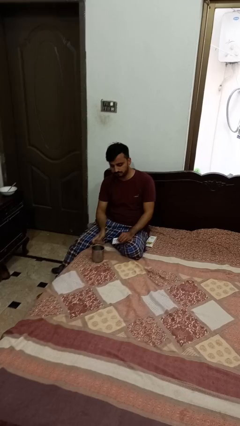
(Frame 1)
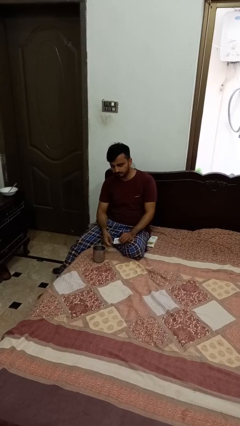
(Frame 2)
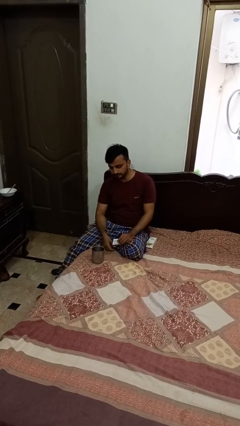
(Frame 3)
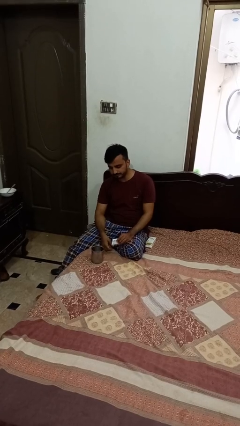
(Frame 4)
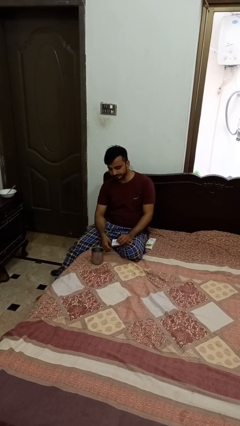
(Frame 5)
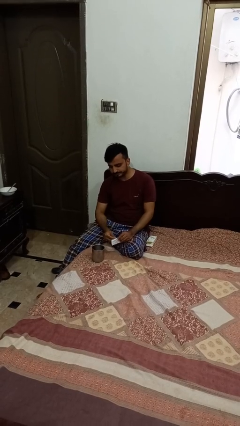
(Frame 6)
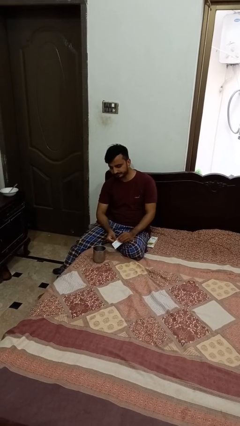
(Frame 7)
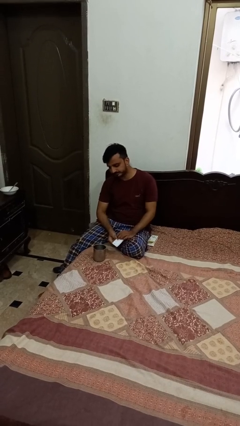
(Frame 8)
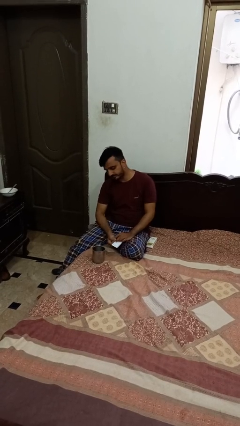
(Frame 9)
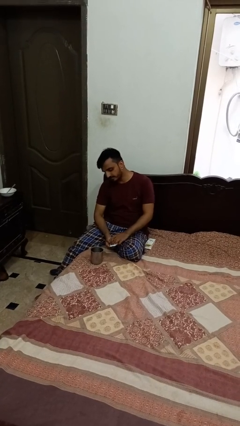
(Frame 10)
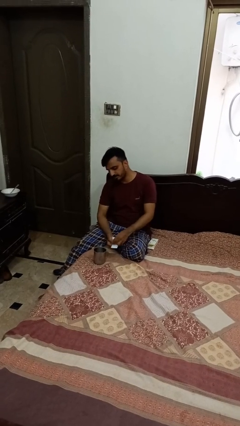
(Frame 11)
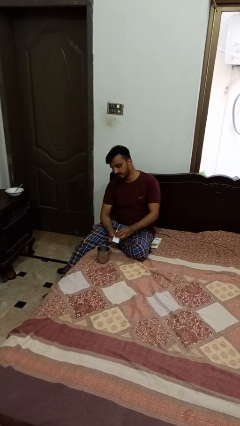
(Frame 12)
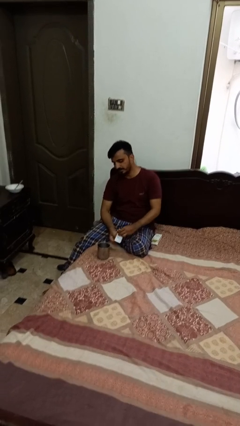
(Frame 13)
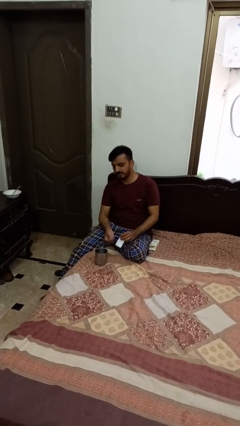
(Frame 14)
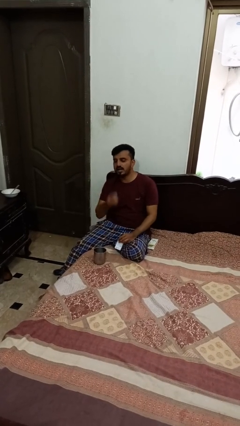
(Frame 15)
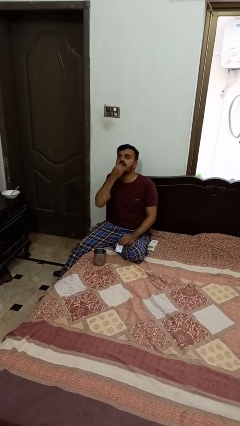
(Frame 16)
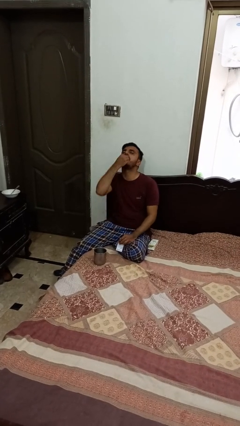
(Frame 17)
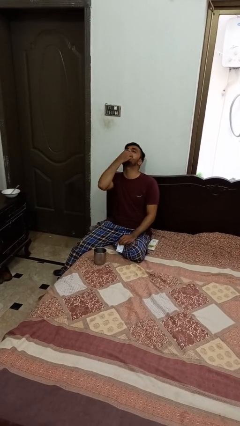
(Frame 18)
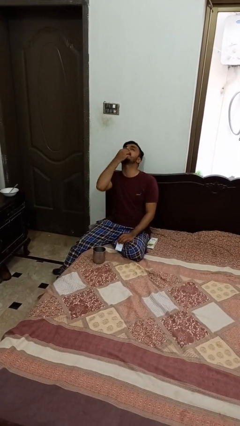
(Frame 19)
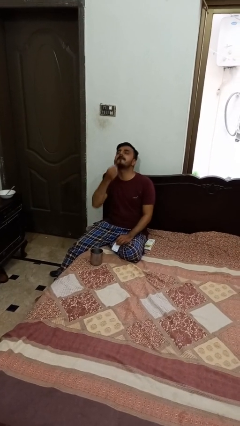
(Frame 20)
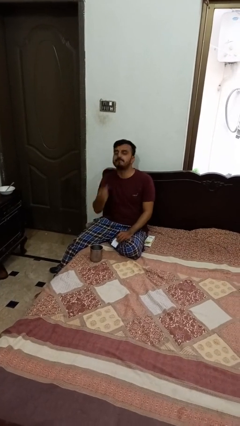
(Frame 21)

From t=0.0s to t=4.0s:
person takes medicine pills

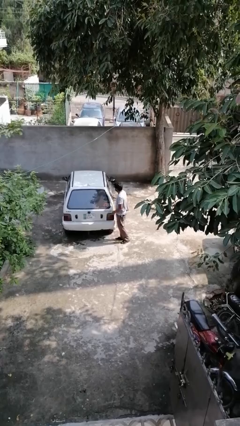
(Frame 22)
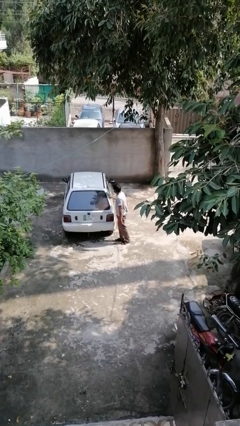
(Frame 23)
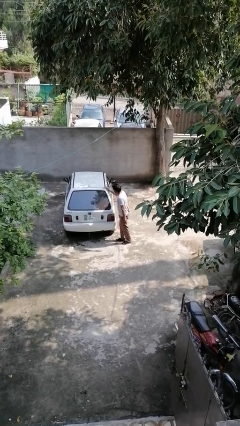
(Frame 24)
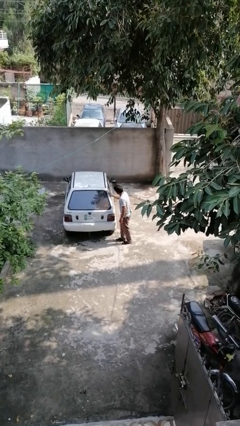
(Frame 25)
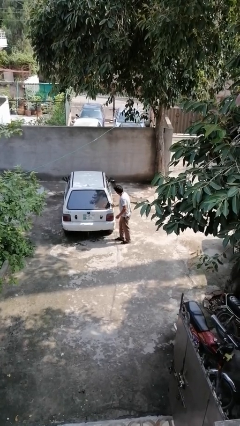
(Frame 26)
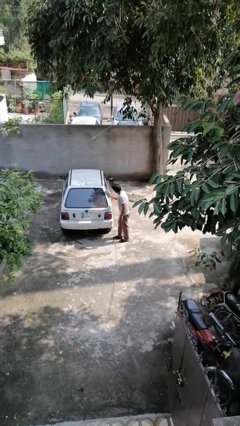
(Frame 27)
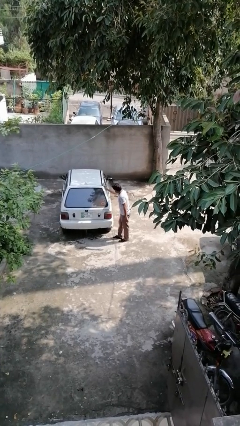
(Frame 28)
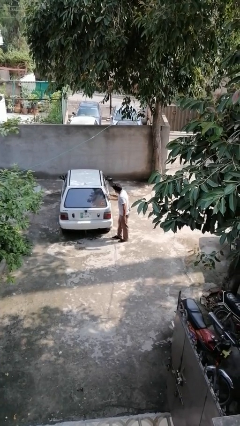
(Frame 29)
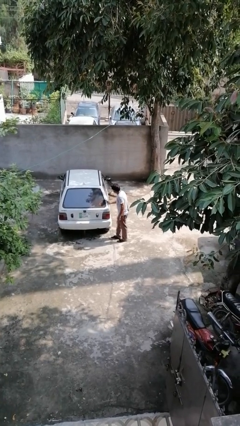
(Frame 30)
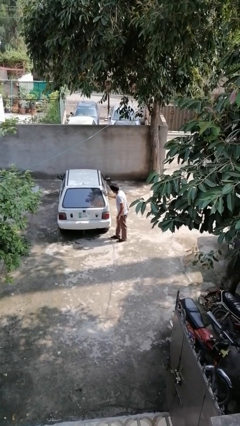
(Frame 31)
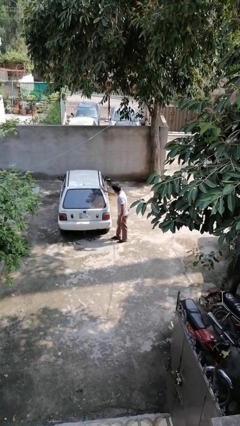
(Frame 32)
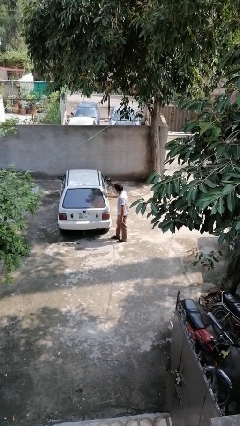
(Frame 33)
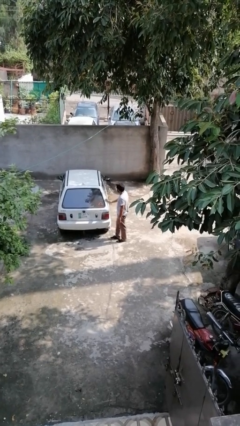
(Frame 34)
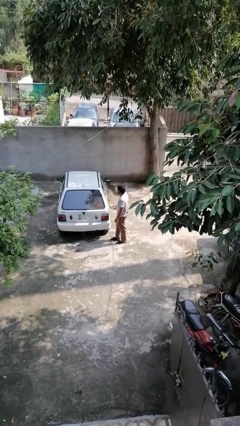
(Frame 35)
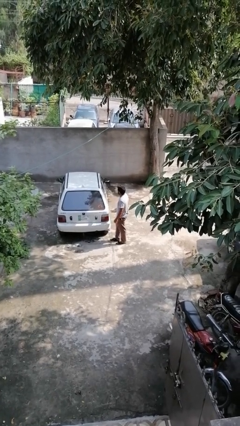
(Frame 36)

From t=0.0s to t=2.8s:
person polishes car with rag

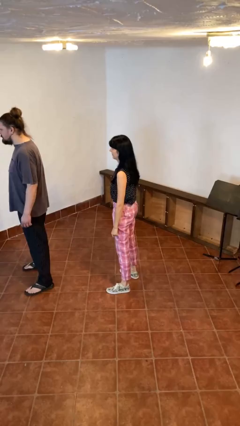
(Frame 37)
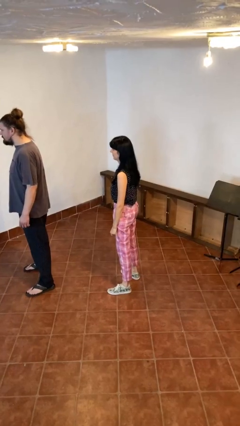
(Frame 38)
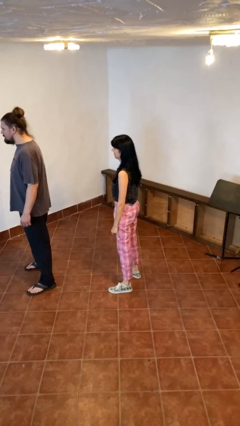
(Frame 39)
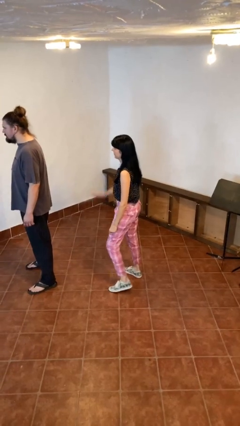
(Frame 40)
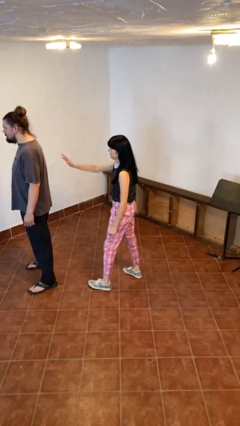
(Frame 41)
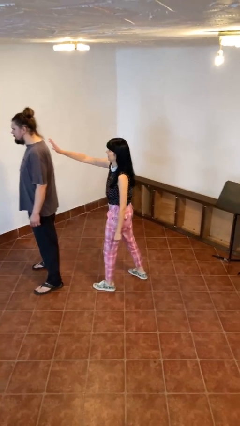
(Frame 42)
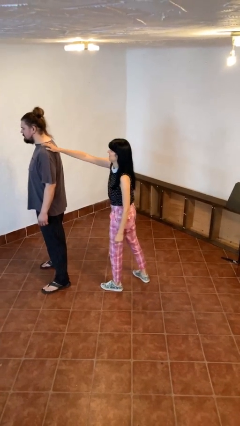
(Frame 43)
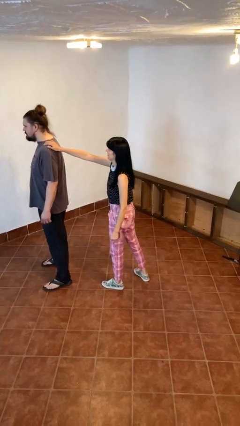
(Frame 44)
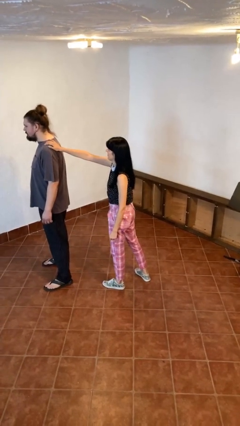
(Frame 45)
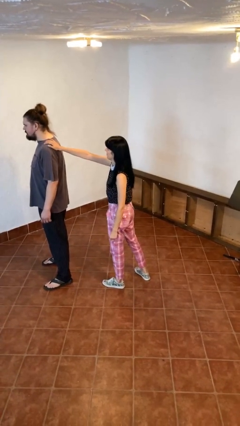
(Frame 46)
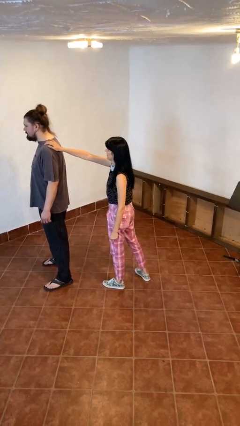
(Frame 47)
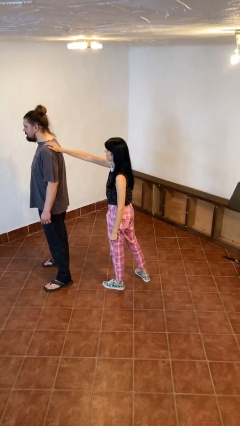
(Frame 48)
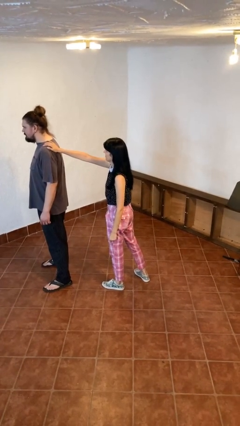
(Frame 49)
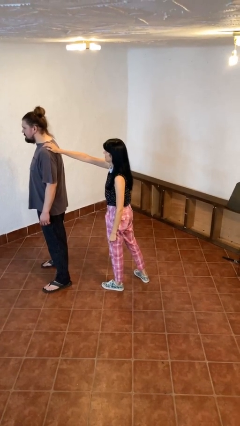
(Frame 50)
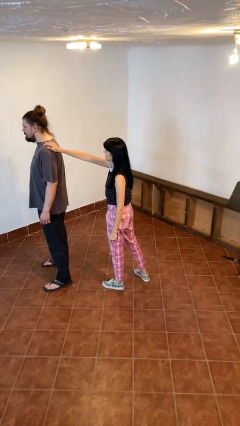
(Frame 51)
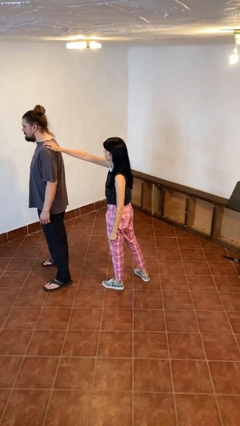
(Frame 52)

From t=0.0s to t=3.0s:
person grabs person by shoulder

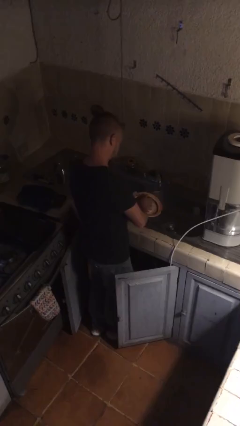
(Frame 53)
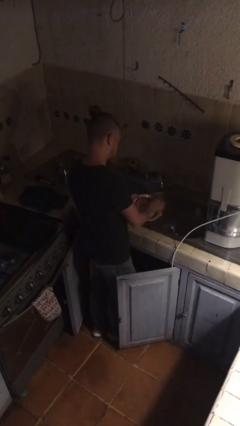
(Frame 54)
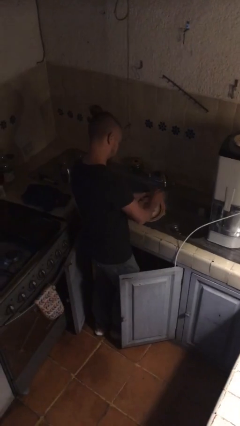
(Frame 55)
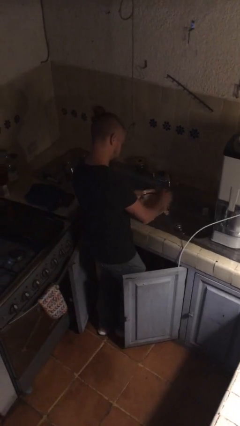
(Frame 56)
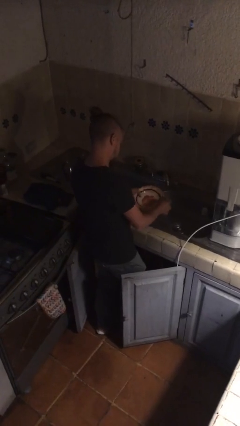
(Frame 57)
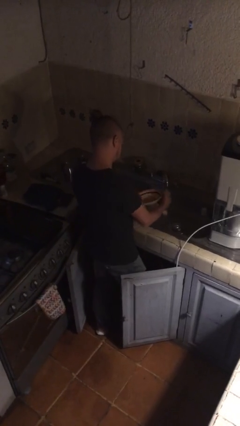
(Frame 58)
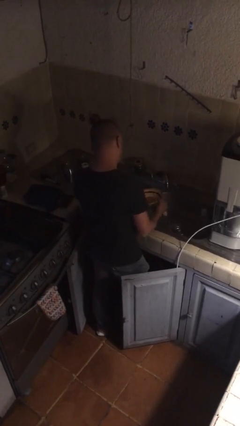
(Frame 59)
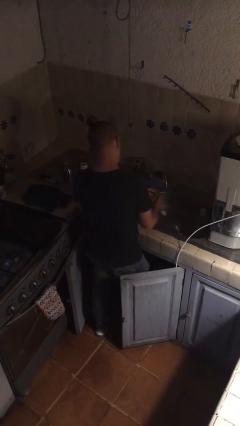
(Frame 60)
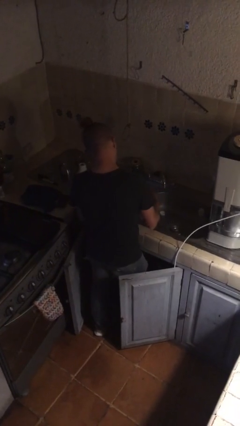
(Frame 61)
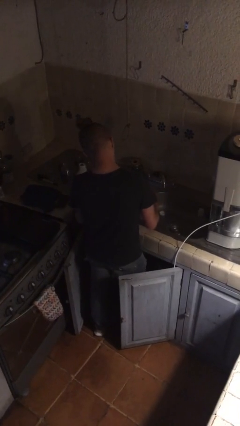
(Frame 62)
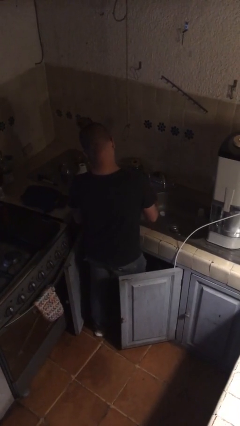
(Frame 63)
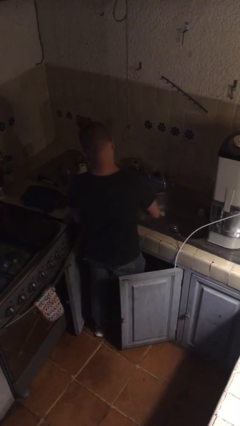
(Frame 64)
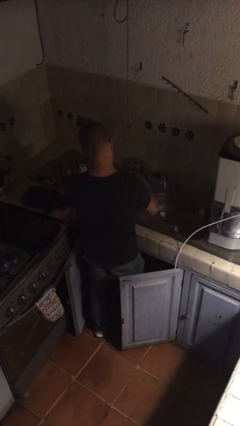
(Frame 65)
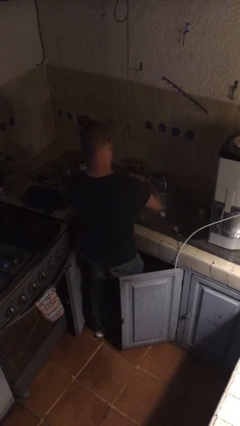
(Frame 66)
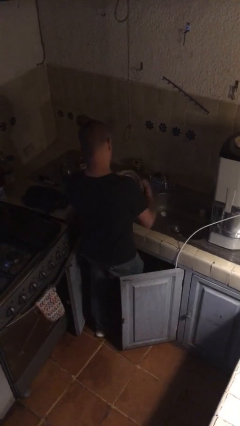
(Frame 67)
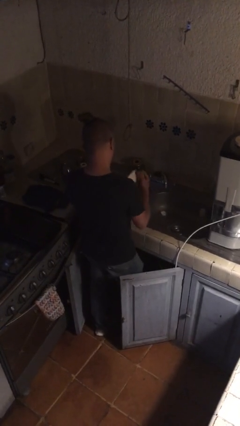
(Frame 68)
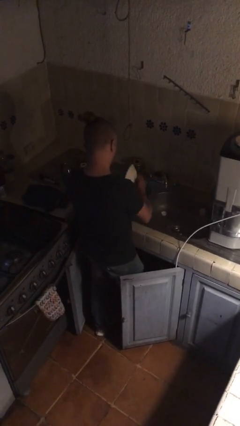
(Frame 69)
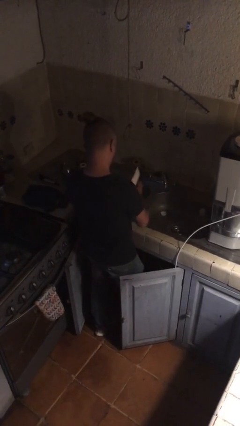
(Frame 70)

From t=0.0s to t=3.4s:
person washes dish

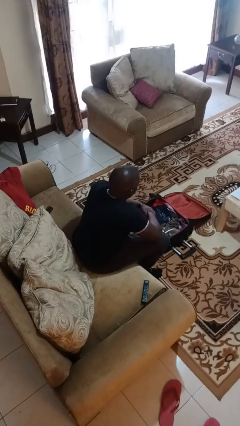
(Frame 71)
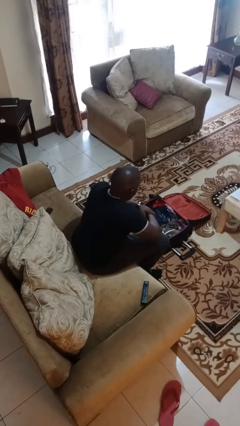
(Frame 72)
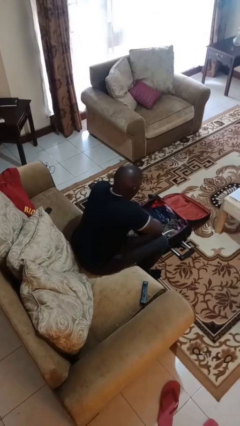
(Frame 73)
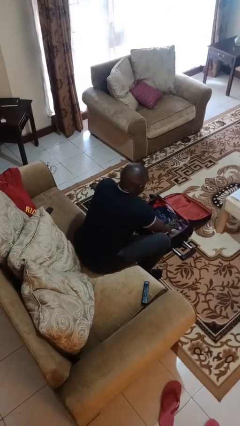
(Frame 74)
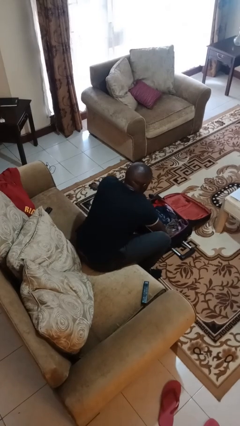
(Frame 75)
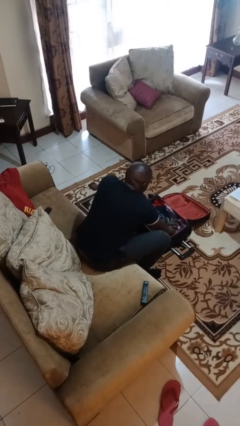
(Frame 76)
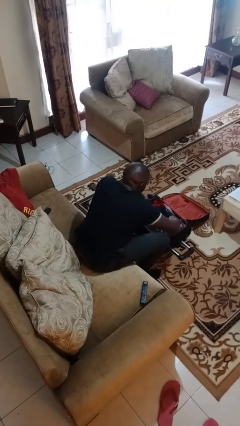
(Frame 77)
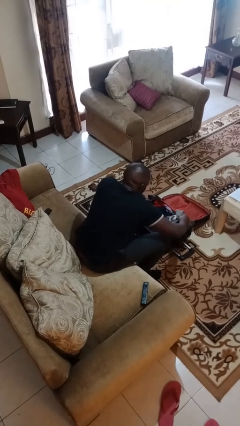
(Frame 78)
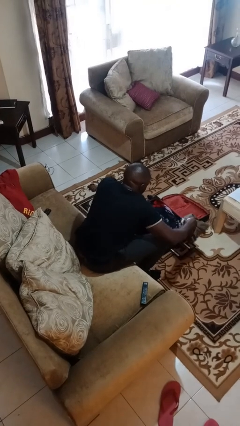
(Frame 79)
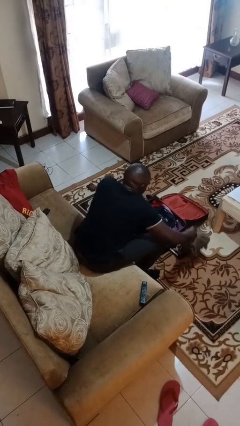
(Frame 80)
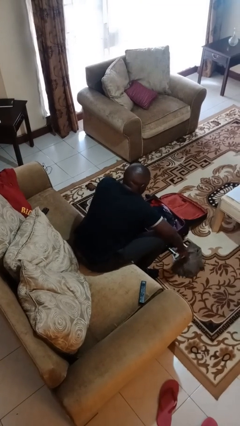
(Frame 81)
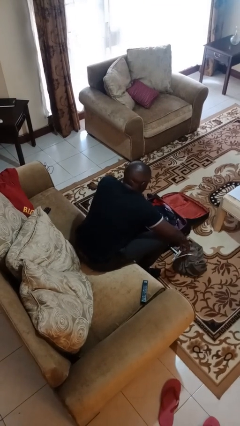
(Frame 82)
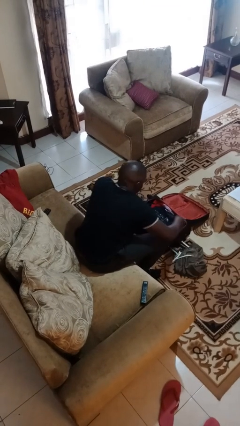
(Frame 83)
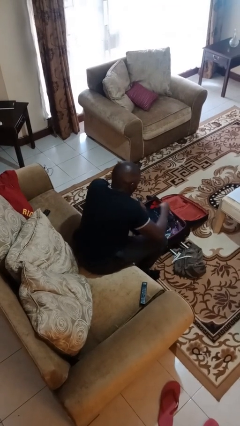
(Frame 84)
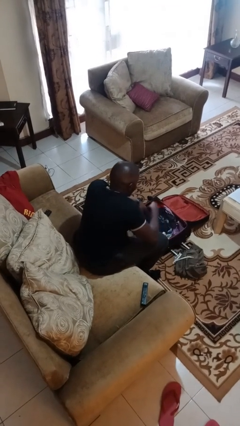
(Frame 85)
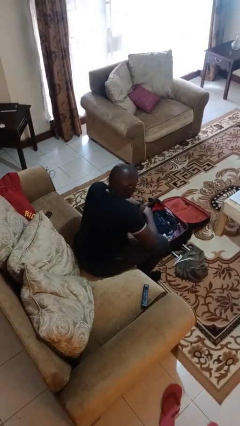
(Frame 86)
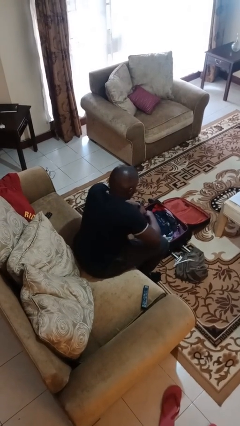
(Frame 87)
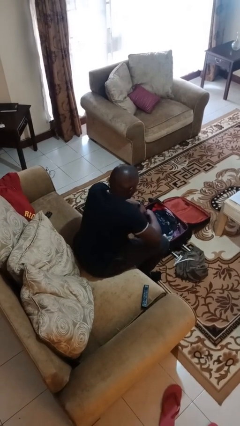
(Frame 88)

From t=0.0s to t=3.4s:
person unloads clothes from suitcase

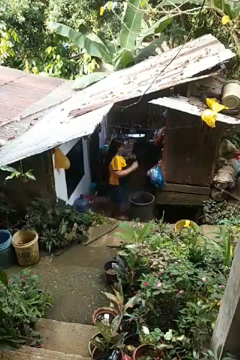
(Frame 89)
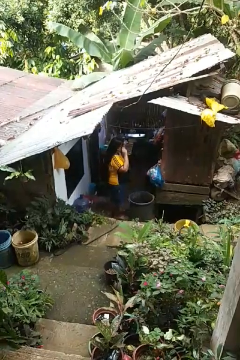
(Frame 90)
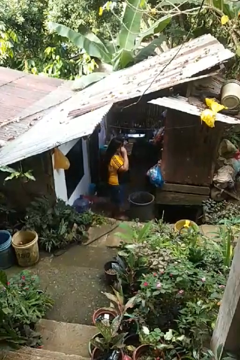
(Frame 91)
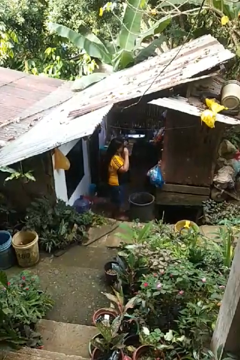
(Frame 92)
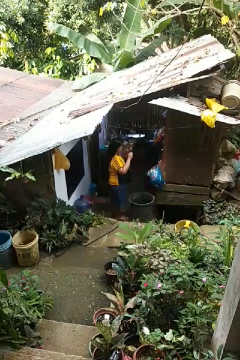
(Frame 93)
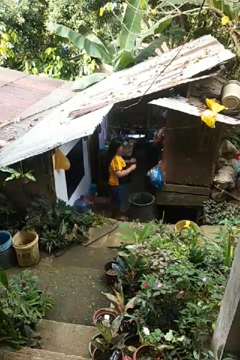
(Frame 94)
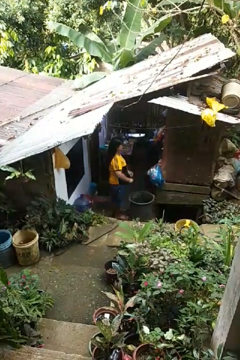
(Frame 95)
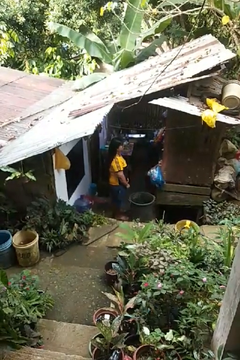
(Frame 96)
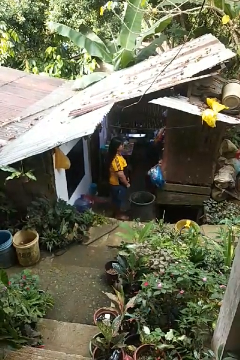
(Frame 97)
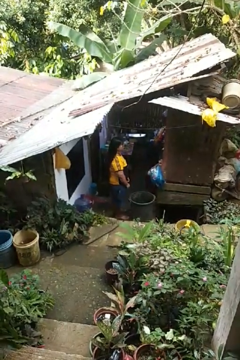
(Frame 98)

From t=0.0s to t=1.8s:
person takes off sunglasses
